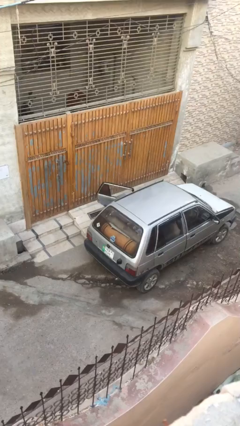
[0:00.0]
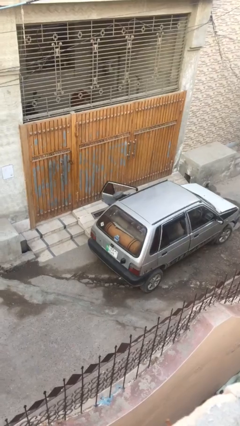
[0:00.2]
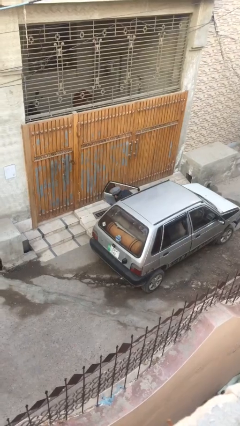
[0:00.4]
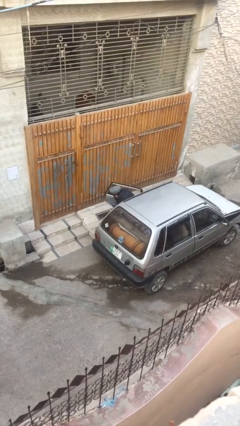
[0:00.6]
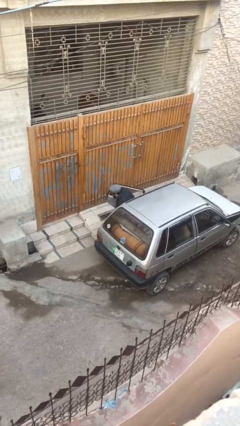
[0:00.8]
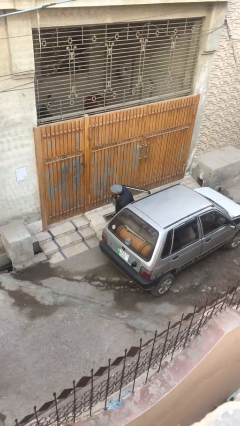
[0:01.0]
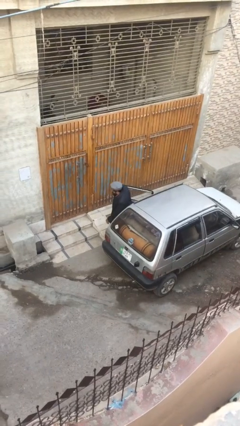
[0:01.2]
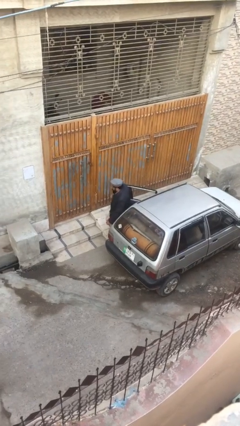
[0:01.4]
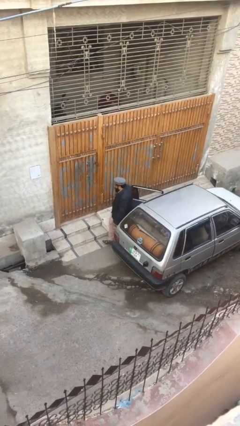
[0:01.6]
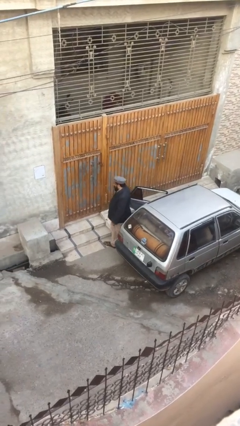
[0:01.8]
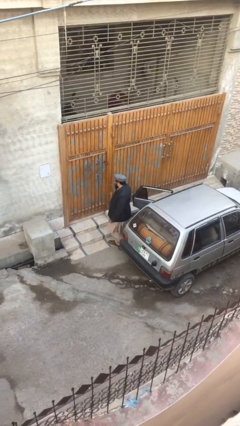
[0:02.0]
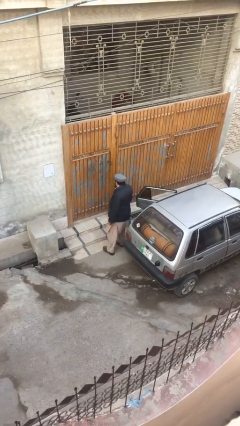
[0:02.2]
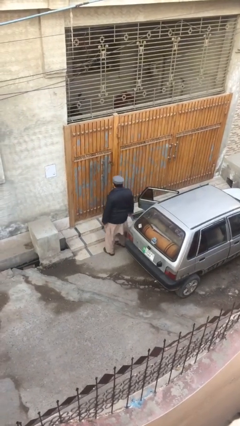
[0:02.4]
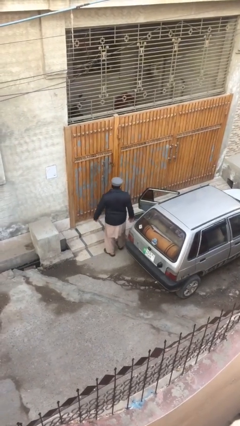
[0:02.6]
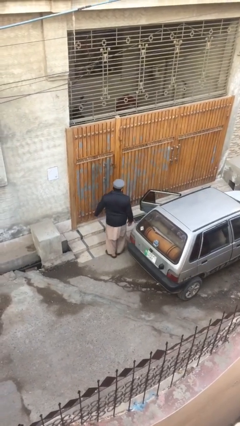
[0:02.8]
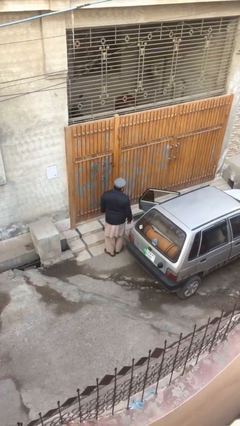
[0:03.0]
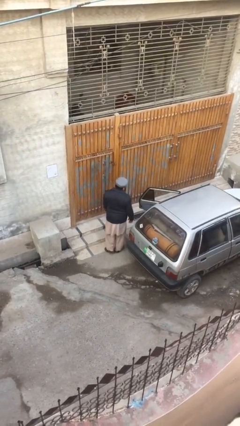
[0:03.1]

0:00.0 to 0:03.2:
person exits car

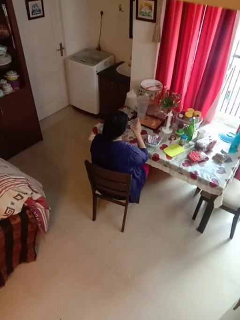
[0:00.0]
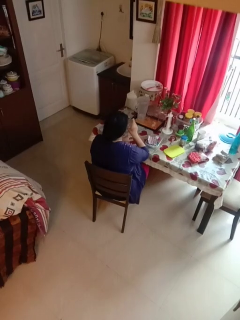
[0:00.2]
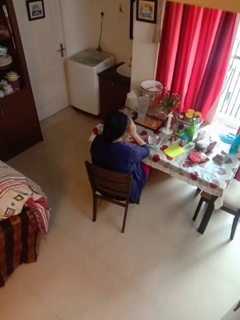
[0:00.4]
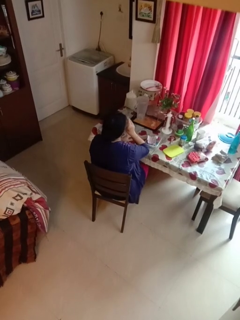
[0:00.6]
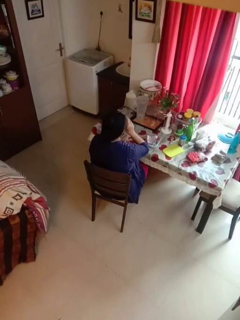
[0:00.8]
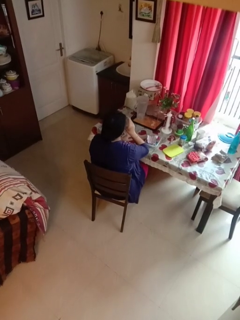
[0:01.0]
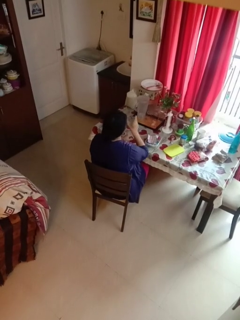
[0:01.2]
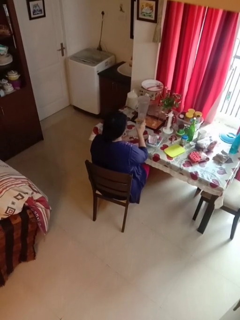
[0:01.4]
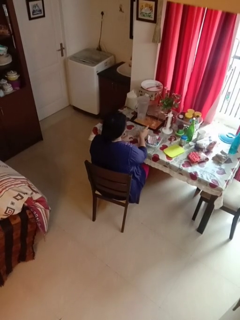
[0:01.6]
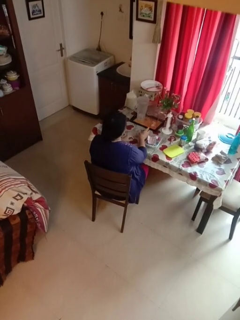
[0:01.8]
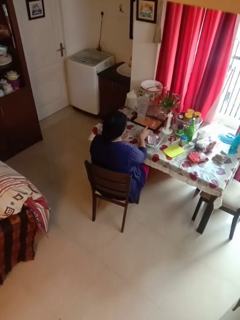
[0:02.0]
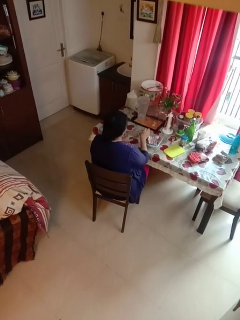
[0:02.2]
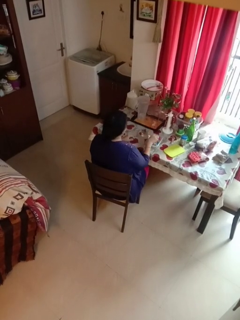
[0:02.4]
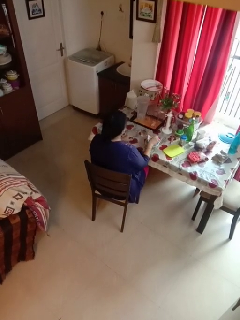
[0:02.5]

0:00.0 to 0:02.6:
person drinks from cup

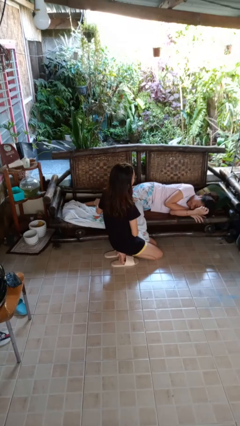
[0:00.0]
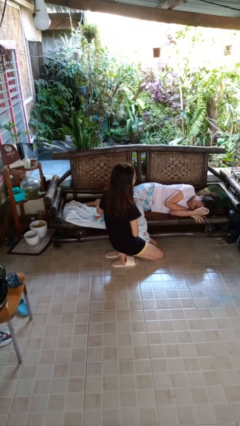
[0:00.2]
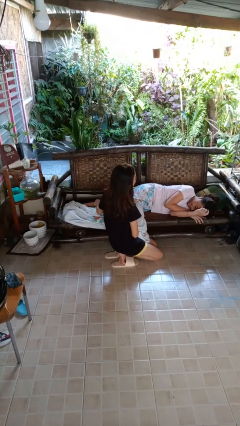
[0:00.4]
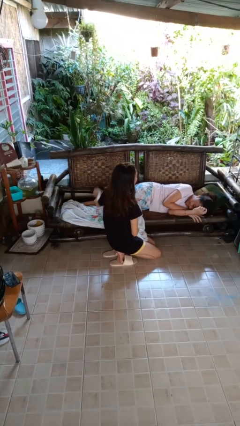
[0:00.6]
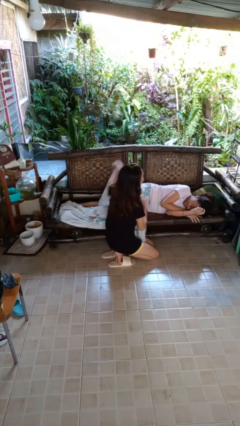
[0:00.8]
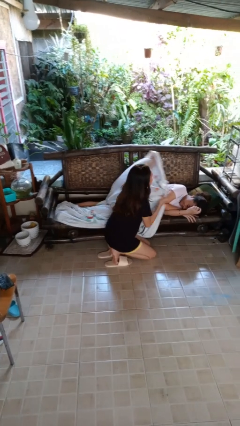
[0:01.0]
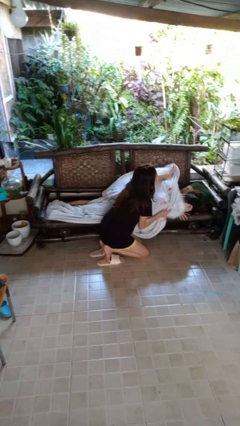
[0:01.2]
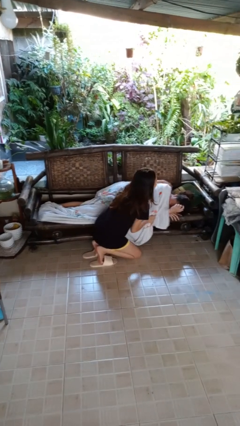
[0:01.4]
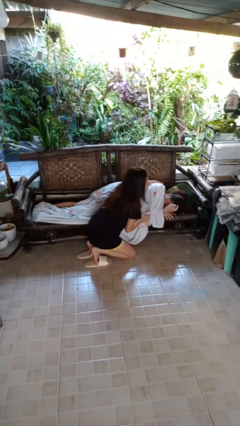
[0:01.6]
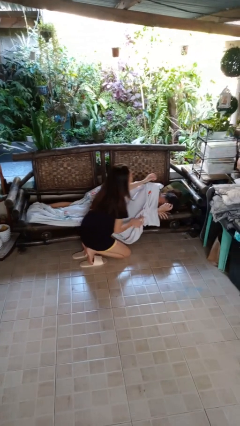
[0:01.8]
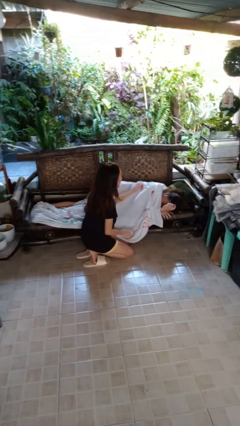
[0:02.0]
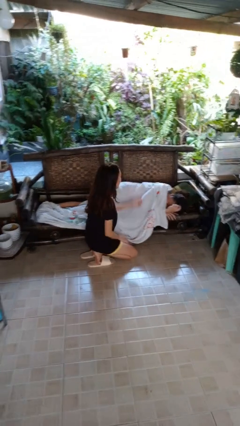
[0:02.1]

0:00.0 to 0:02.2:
person covers friend with blanket

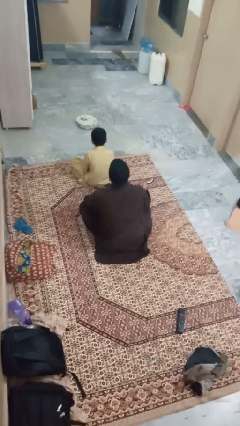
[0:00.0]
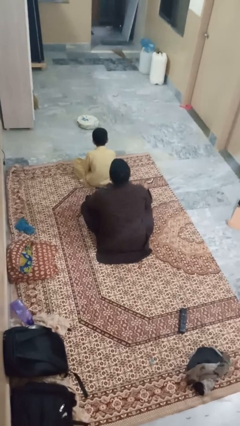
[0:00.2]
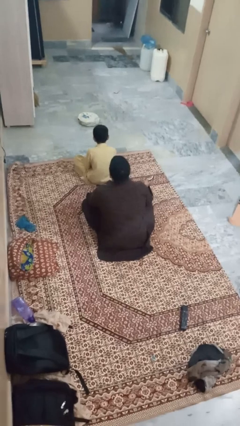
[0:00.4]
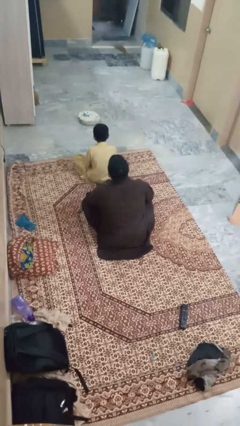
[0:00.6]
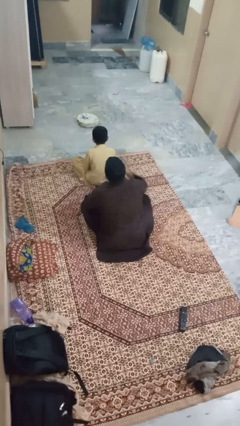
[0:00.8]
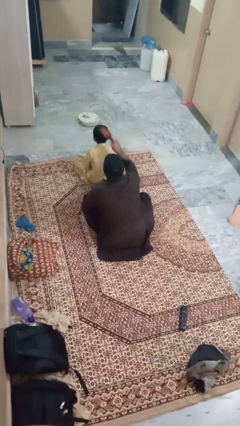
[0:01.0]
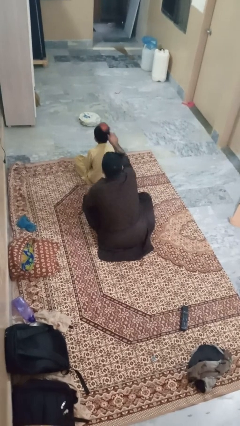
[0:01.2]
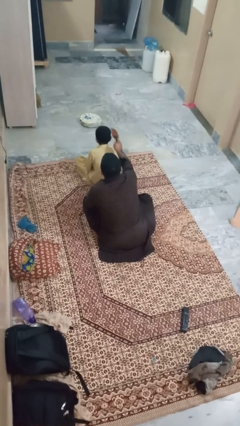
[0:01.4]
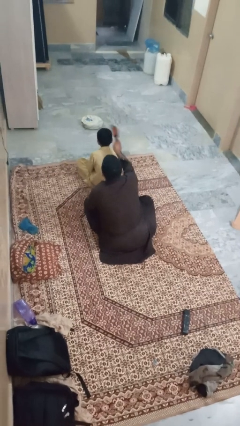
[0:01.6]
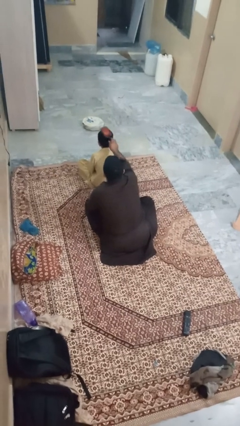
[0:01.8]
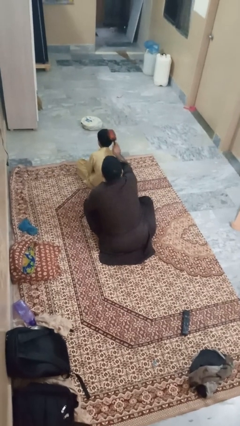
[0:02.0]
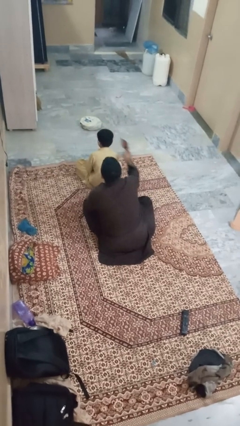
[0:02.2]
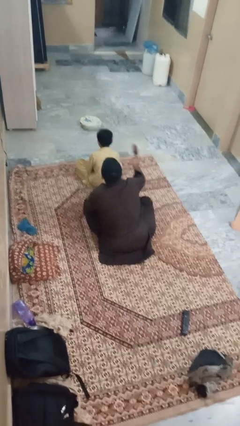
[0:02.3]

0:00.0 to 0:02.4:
person brushes hair of person

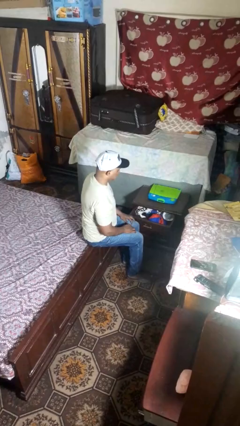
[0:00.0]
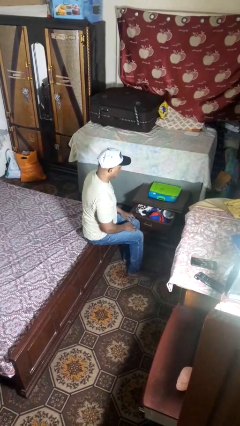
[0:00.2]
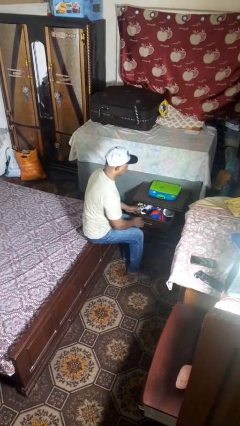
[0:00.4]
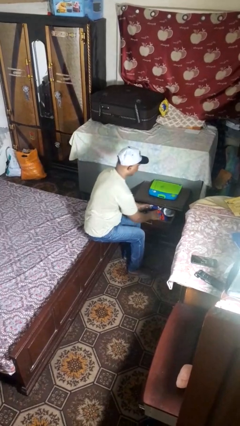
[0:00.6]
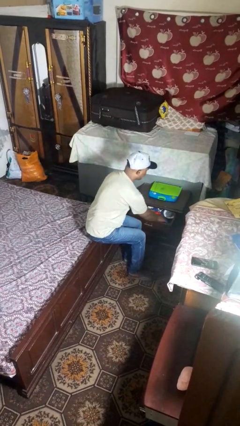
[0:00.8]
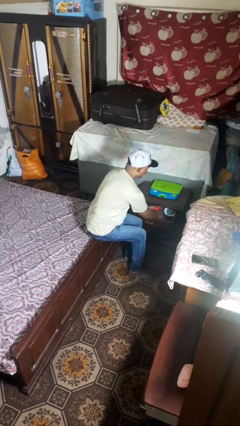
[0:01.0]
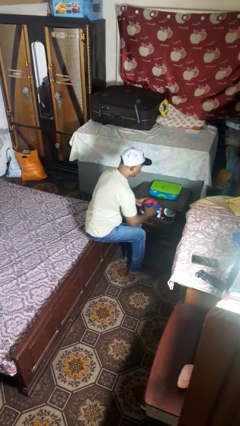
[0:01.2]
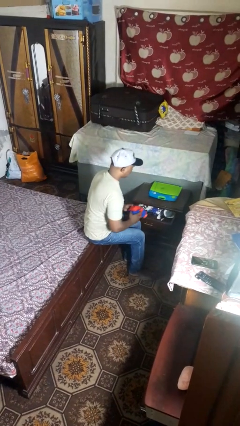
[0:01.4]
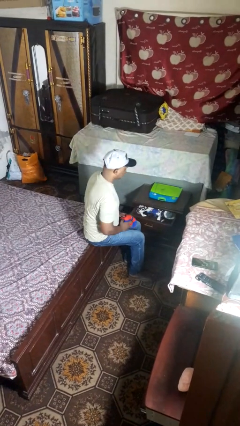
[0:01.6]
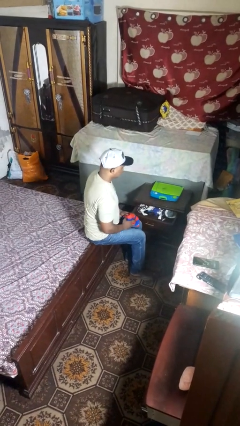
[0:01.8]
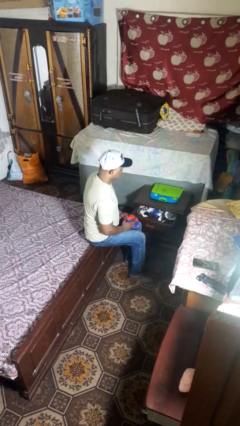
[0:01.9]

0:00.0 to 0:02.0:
person takes clothes from dresser

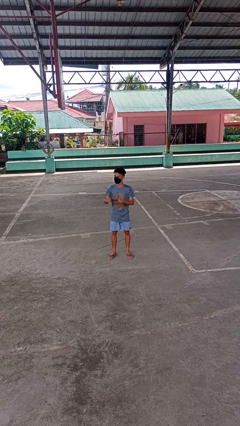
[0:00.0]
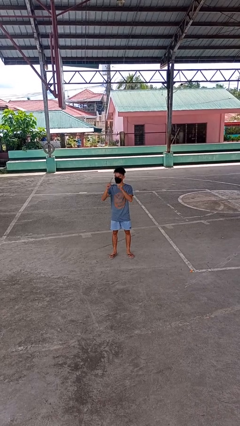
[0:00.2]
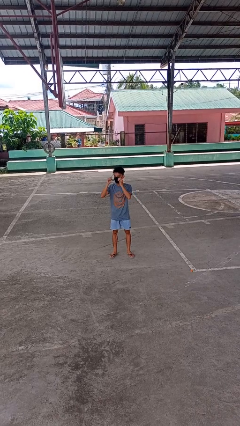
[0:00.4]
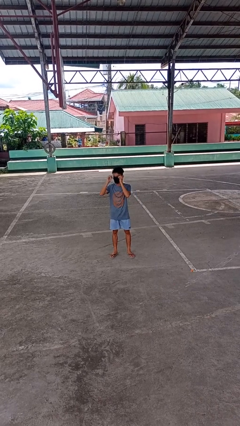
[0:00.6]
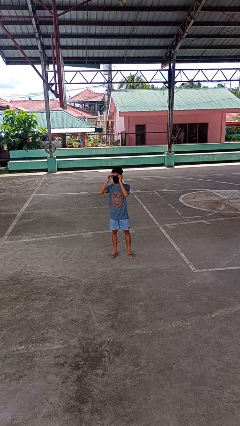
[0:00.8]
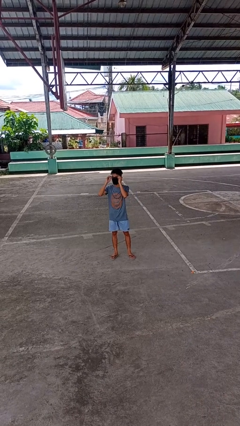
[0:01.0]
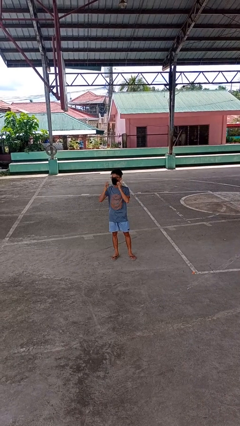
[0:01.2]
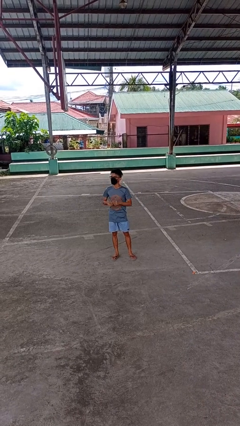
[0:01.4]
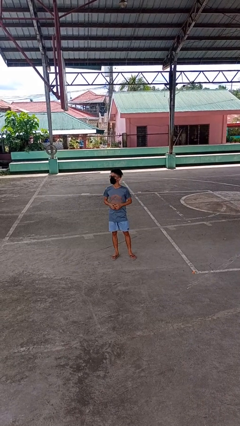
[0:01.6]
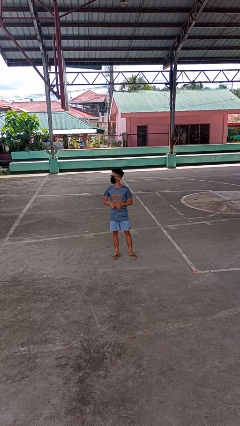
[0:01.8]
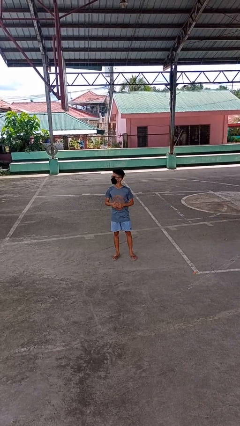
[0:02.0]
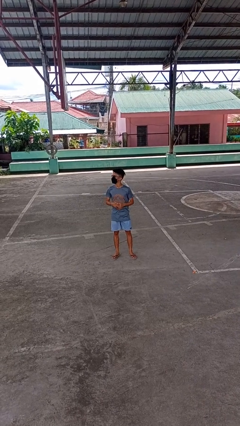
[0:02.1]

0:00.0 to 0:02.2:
person puts on glasses

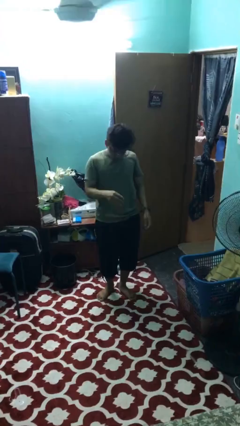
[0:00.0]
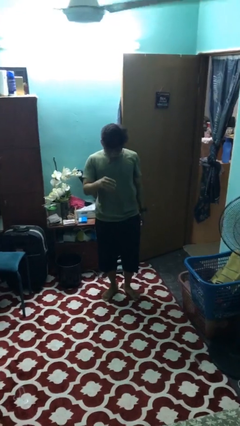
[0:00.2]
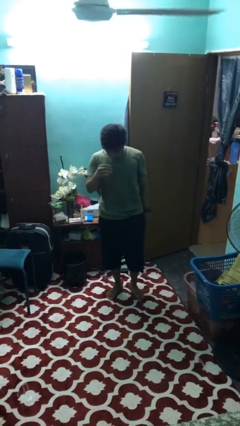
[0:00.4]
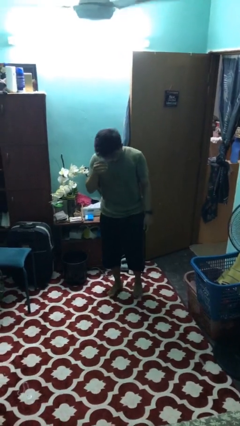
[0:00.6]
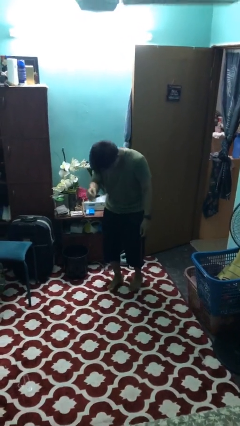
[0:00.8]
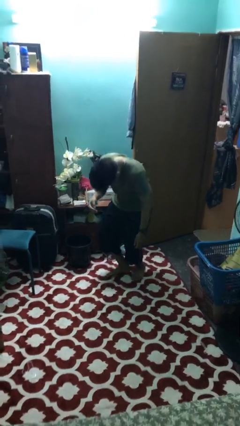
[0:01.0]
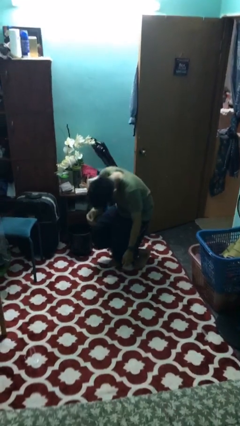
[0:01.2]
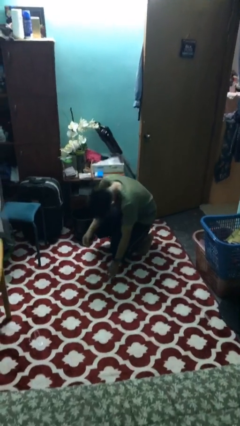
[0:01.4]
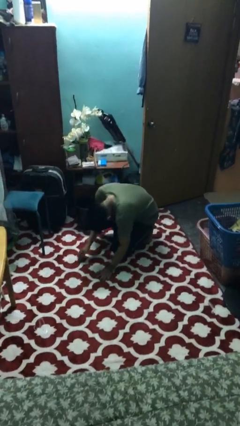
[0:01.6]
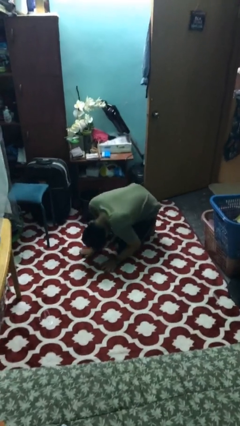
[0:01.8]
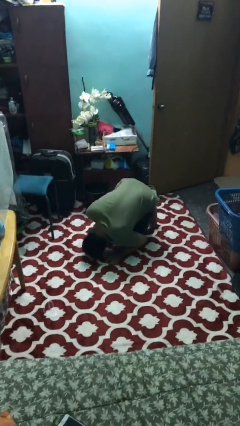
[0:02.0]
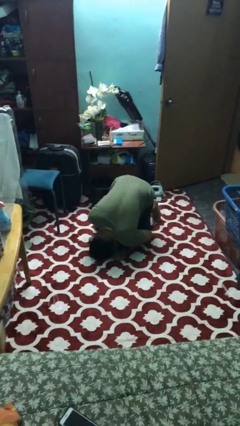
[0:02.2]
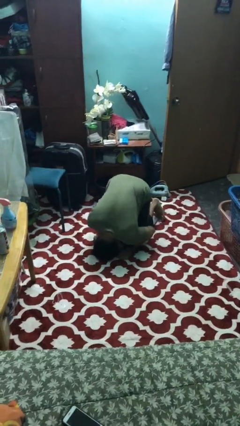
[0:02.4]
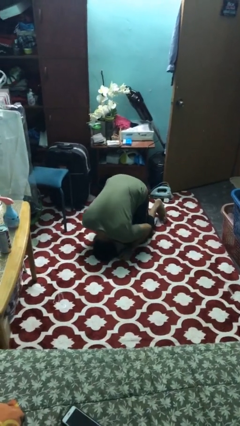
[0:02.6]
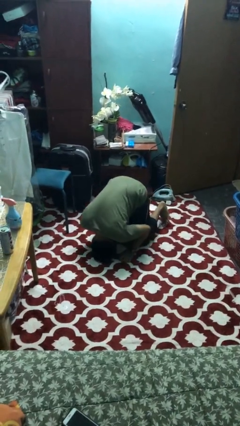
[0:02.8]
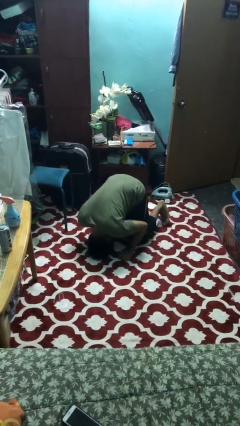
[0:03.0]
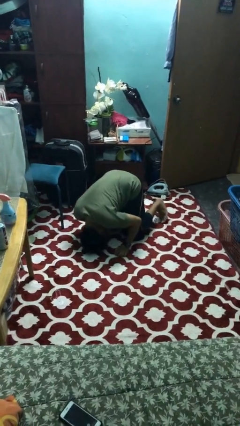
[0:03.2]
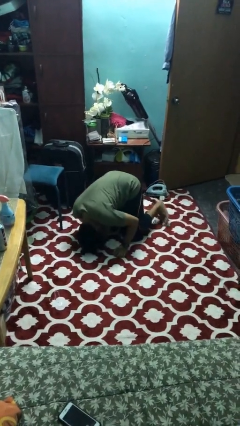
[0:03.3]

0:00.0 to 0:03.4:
person falls while standing

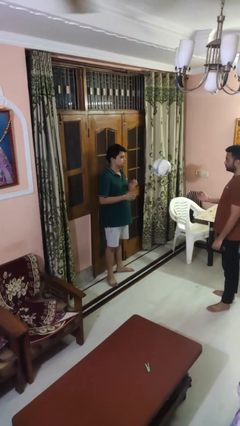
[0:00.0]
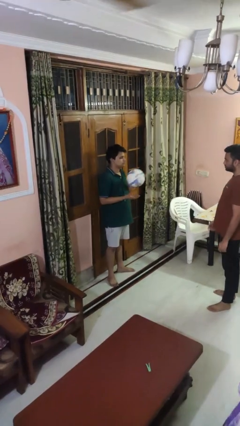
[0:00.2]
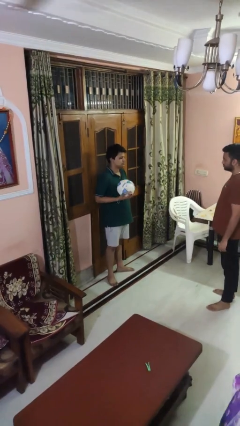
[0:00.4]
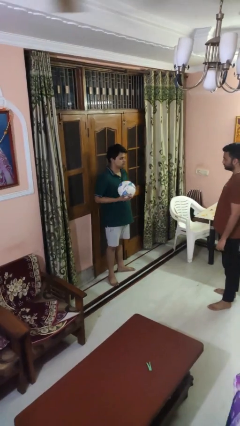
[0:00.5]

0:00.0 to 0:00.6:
person catches object from person
